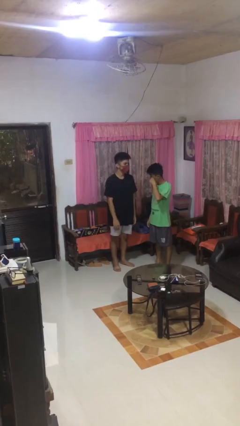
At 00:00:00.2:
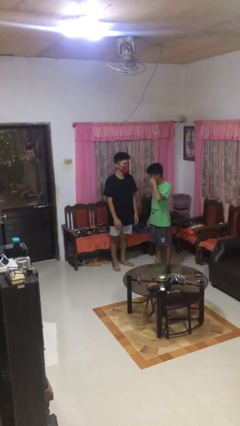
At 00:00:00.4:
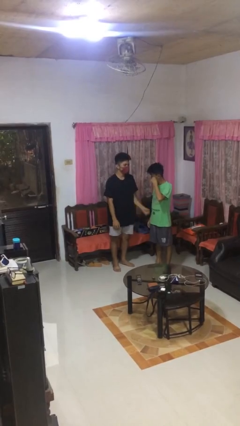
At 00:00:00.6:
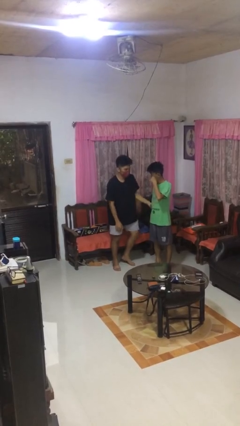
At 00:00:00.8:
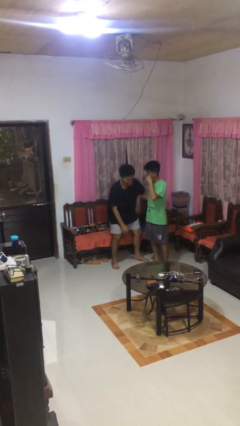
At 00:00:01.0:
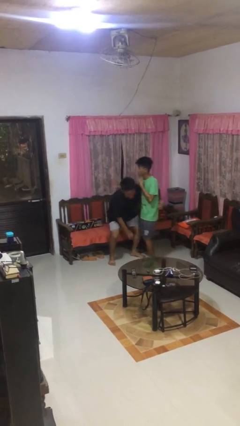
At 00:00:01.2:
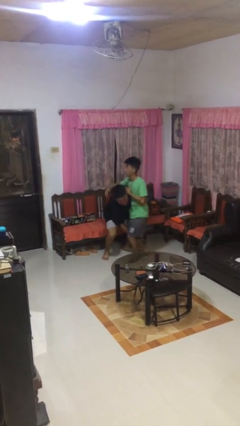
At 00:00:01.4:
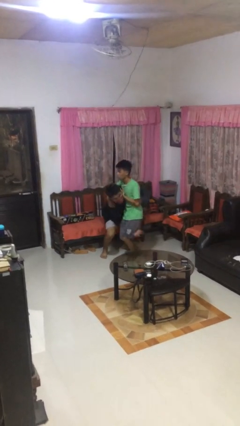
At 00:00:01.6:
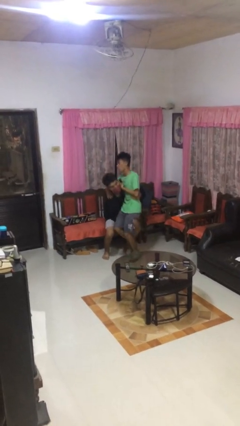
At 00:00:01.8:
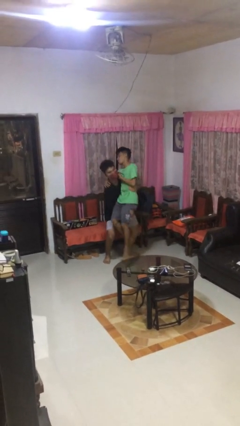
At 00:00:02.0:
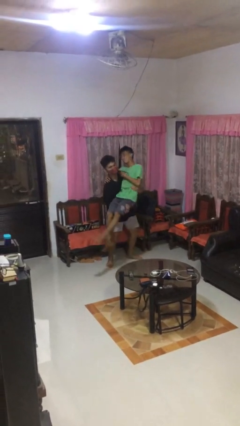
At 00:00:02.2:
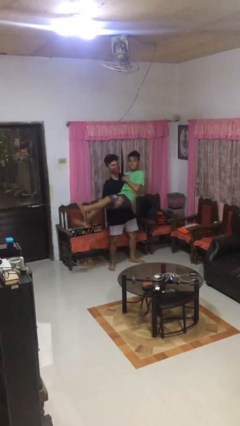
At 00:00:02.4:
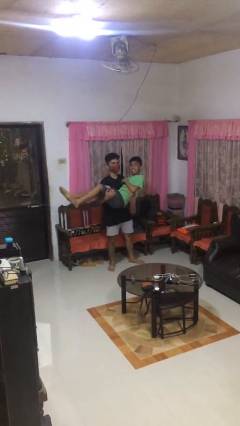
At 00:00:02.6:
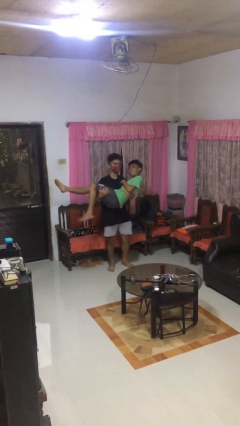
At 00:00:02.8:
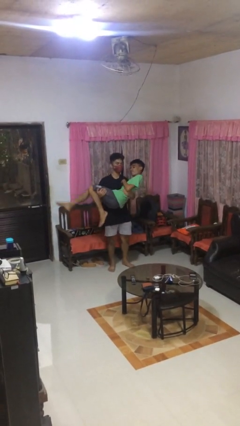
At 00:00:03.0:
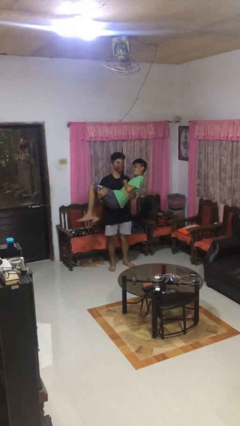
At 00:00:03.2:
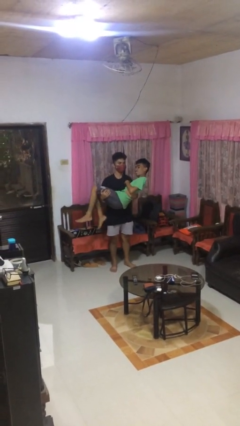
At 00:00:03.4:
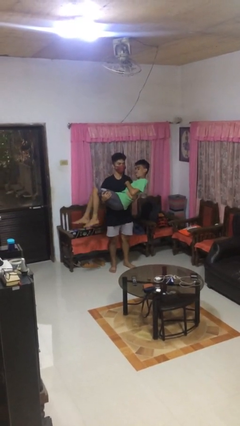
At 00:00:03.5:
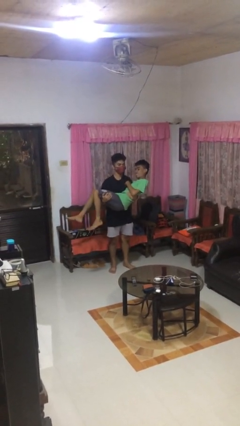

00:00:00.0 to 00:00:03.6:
person picks up person

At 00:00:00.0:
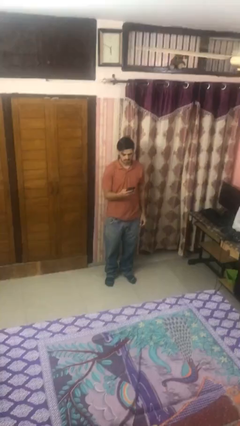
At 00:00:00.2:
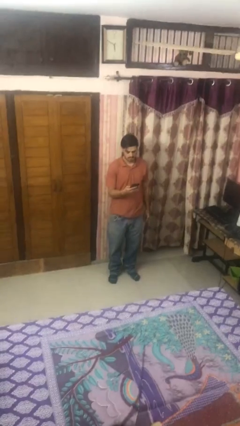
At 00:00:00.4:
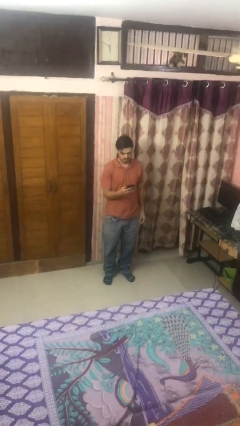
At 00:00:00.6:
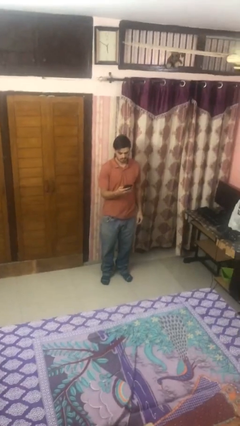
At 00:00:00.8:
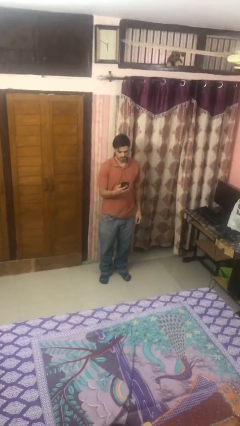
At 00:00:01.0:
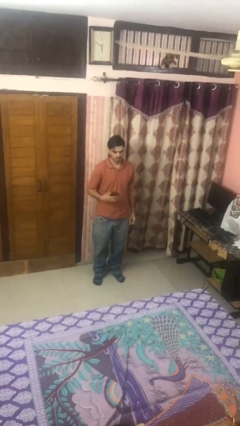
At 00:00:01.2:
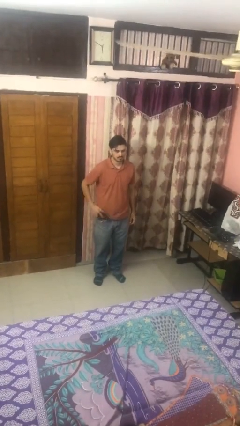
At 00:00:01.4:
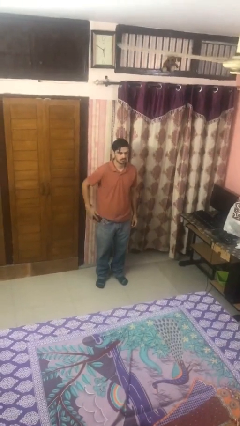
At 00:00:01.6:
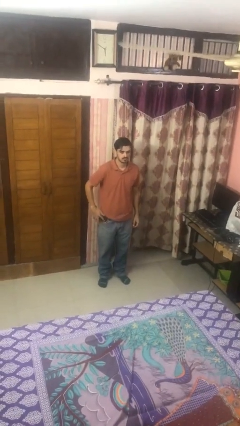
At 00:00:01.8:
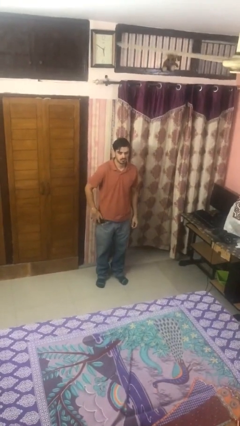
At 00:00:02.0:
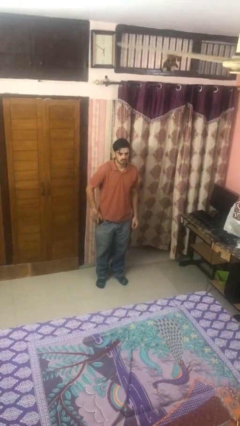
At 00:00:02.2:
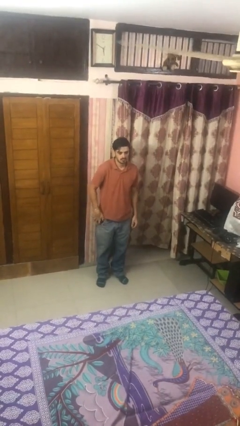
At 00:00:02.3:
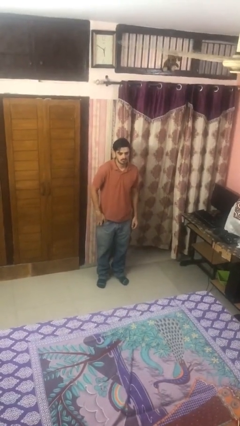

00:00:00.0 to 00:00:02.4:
person puts phone into pocket

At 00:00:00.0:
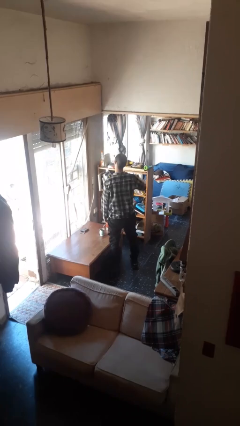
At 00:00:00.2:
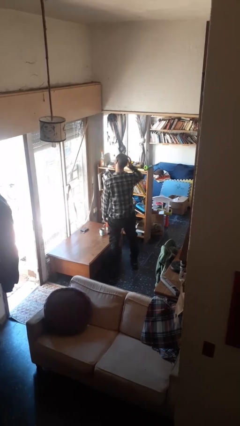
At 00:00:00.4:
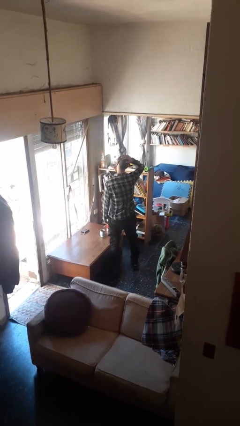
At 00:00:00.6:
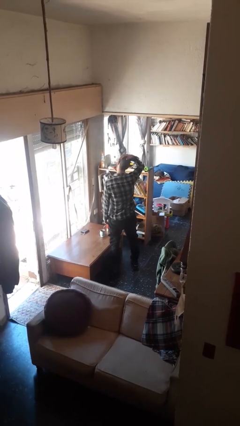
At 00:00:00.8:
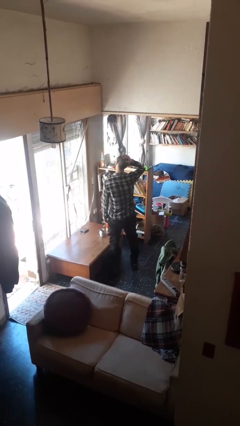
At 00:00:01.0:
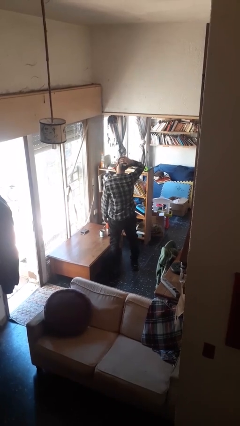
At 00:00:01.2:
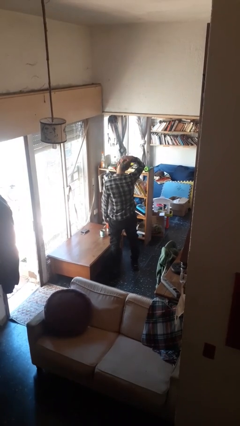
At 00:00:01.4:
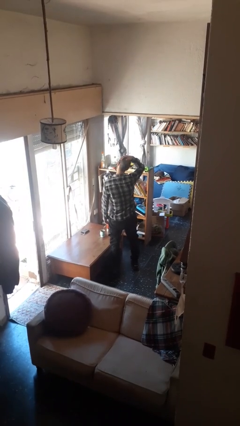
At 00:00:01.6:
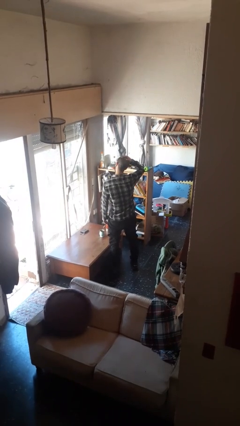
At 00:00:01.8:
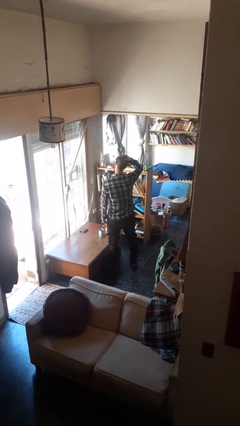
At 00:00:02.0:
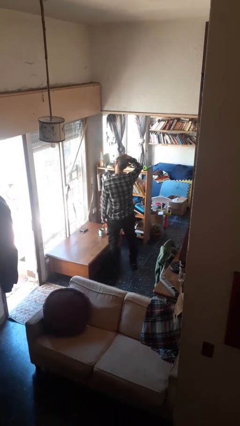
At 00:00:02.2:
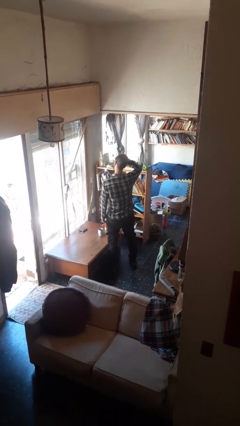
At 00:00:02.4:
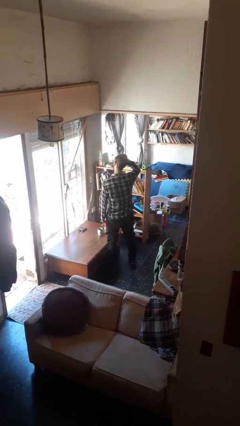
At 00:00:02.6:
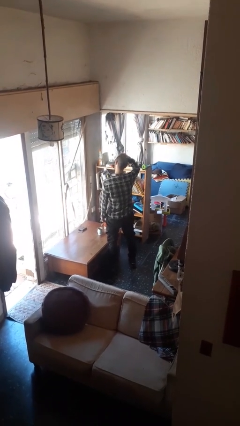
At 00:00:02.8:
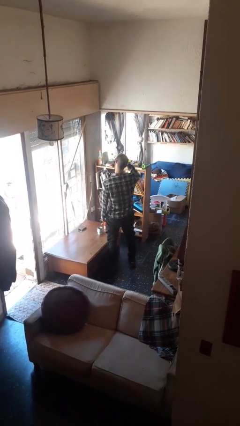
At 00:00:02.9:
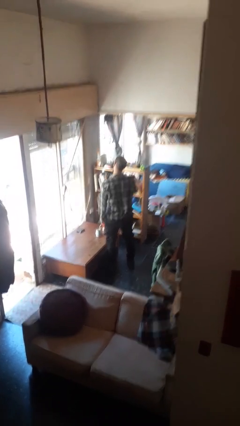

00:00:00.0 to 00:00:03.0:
person pats head

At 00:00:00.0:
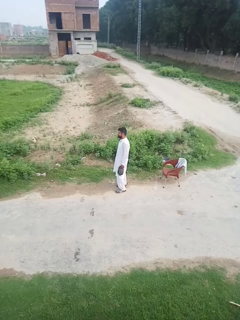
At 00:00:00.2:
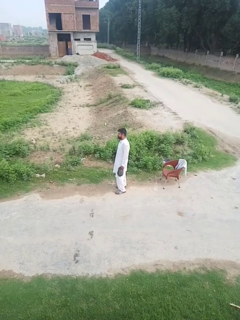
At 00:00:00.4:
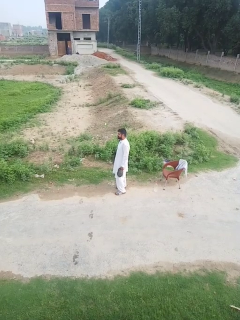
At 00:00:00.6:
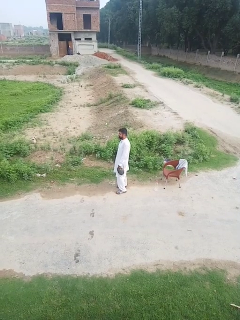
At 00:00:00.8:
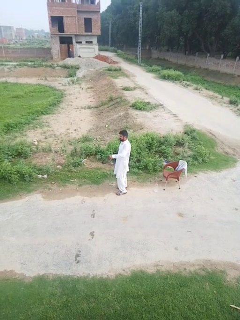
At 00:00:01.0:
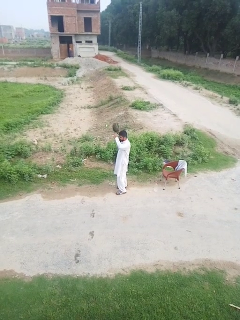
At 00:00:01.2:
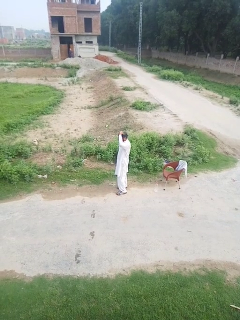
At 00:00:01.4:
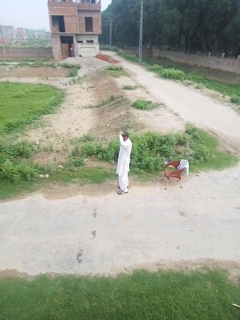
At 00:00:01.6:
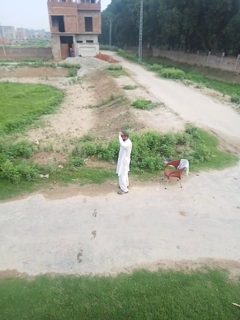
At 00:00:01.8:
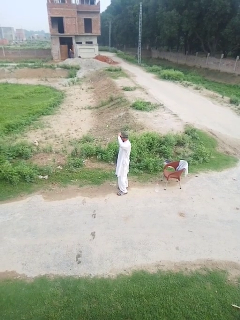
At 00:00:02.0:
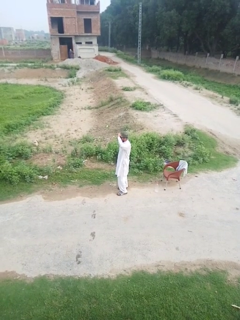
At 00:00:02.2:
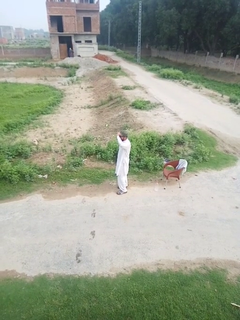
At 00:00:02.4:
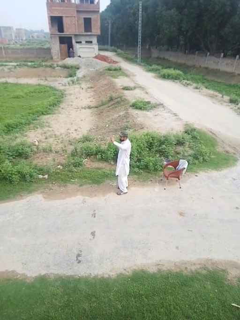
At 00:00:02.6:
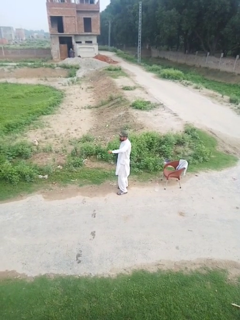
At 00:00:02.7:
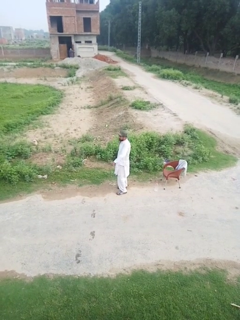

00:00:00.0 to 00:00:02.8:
person puts on hat

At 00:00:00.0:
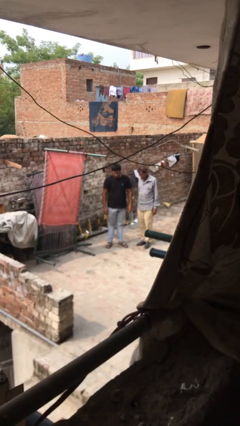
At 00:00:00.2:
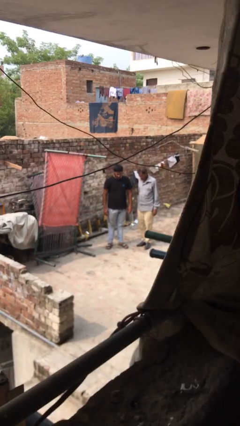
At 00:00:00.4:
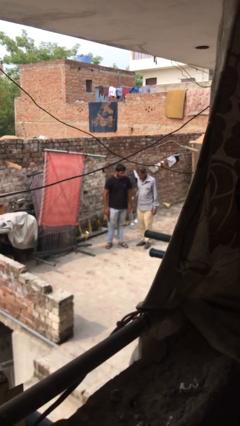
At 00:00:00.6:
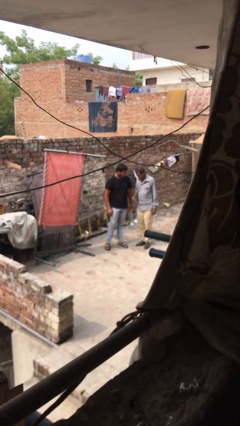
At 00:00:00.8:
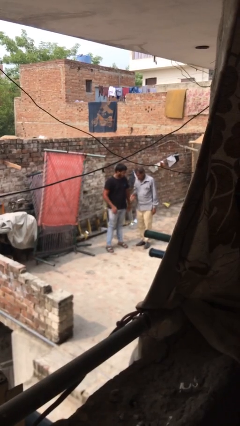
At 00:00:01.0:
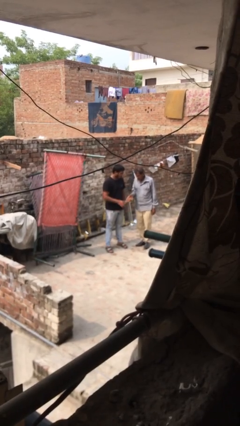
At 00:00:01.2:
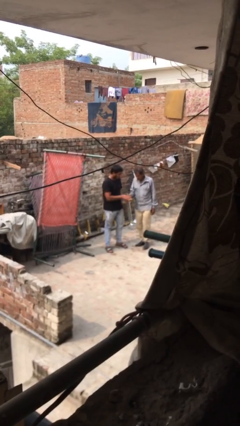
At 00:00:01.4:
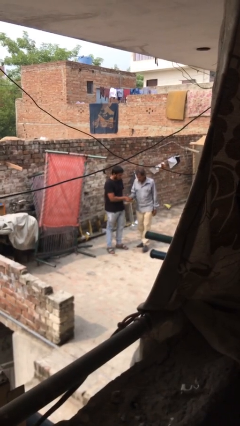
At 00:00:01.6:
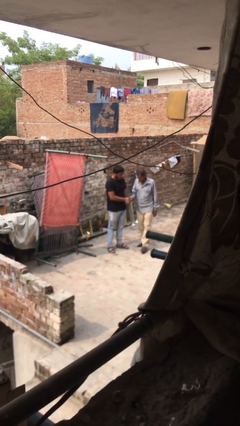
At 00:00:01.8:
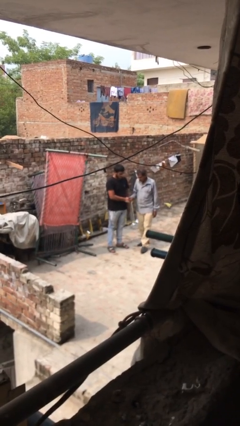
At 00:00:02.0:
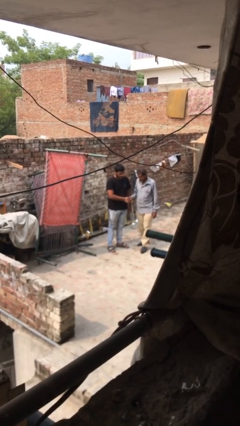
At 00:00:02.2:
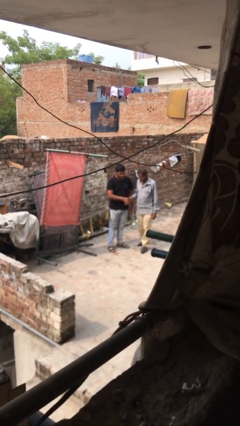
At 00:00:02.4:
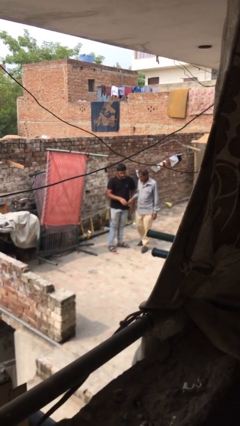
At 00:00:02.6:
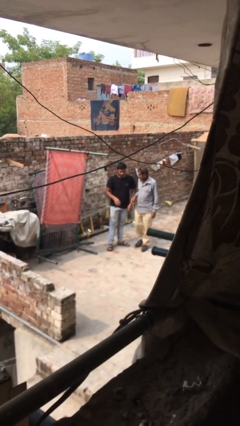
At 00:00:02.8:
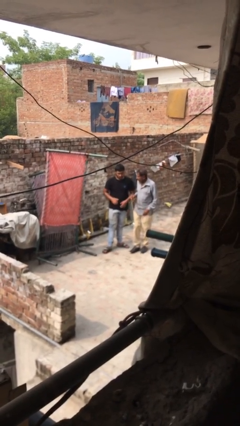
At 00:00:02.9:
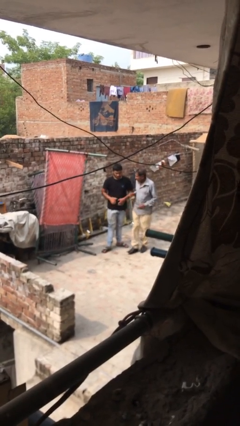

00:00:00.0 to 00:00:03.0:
person shakes hand

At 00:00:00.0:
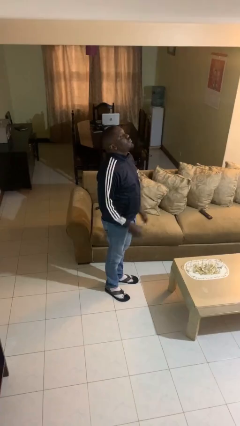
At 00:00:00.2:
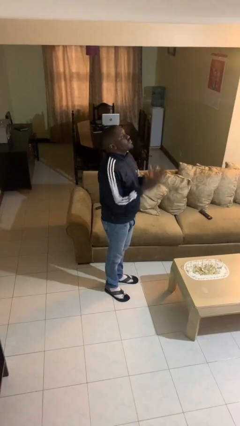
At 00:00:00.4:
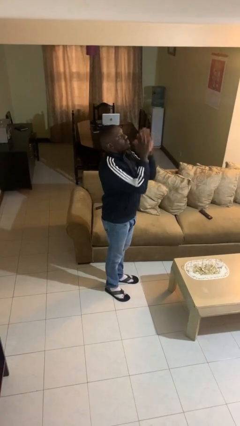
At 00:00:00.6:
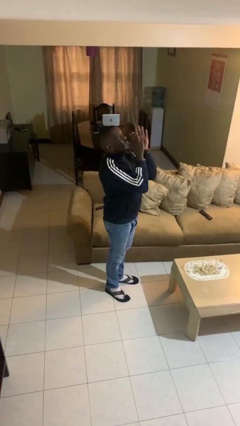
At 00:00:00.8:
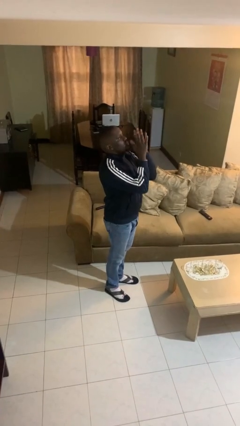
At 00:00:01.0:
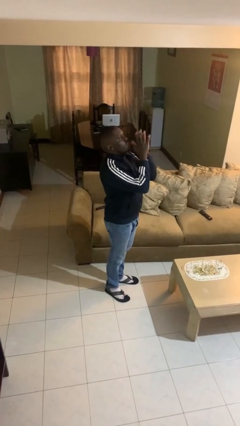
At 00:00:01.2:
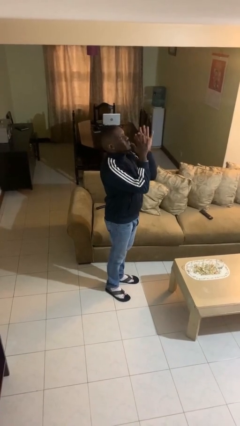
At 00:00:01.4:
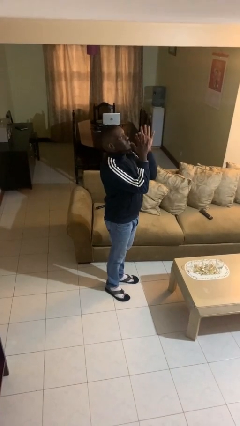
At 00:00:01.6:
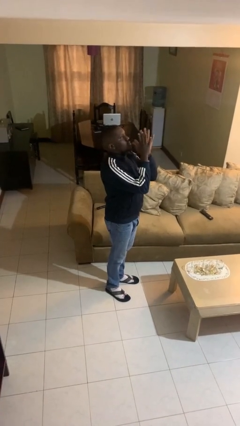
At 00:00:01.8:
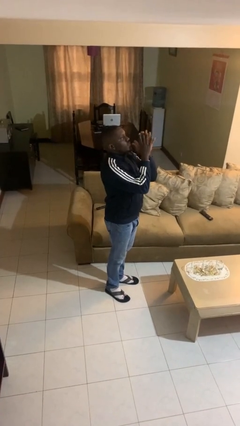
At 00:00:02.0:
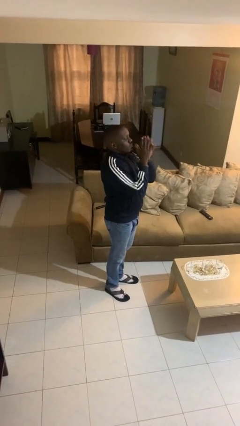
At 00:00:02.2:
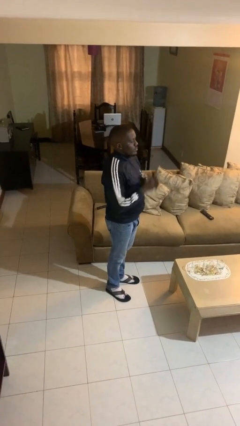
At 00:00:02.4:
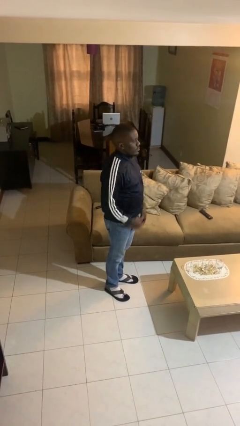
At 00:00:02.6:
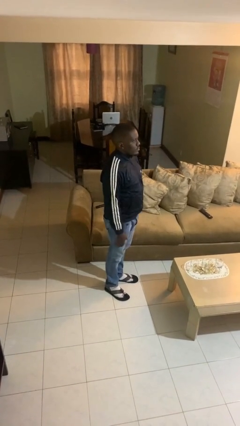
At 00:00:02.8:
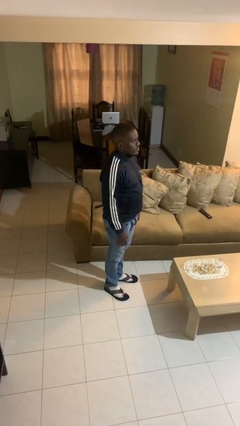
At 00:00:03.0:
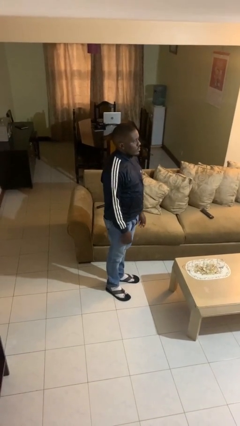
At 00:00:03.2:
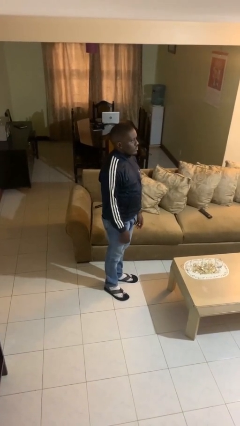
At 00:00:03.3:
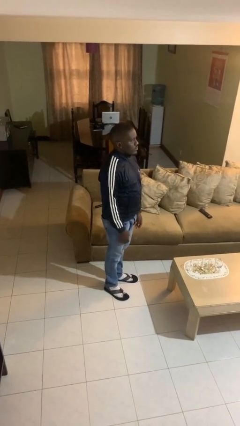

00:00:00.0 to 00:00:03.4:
person claps hands
